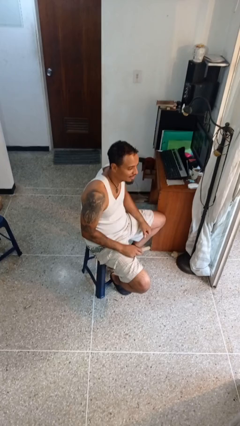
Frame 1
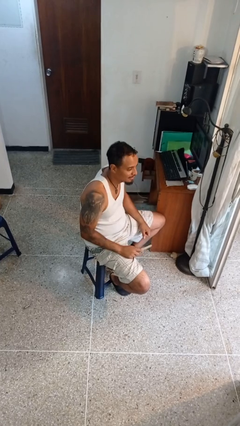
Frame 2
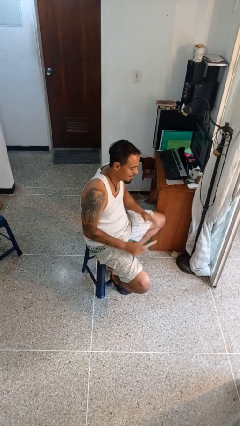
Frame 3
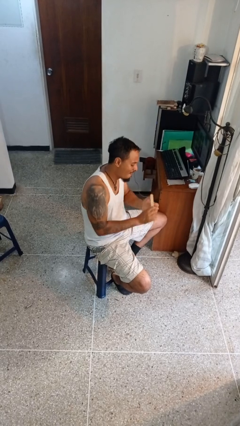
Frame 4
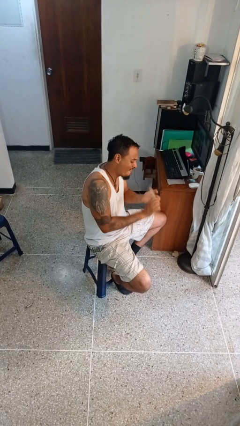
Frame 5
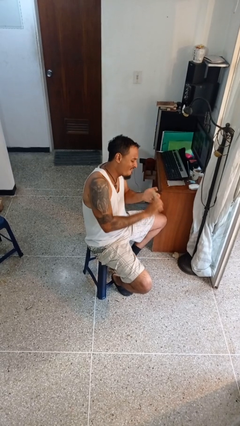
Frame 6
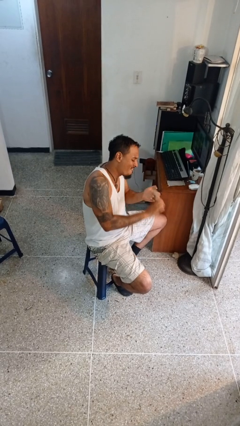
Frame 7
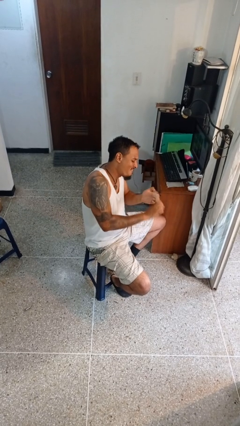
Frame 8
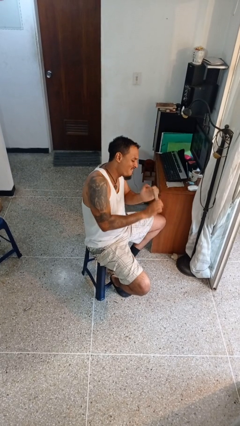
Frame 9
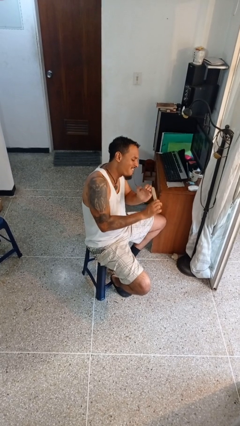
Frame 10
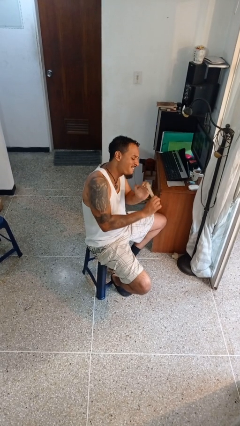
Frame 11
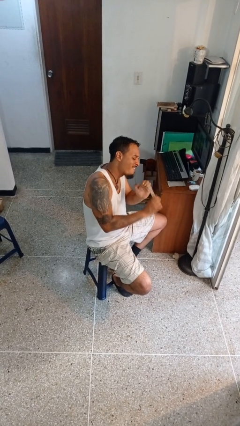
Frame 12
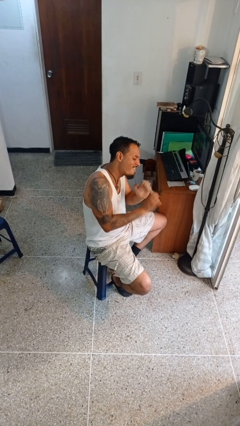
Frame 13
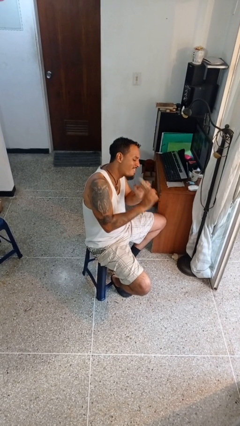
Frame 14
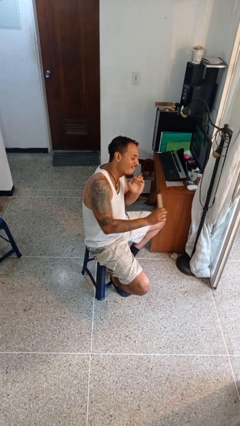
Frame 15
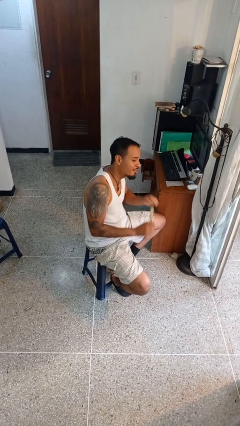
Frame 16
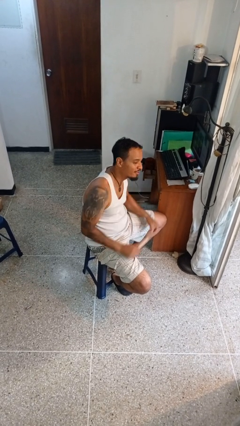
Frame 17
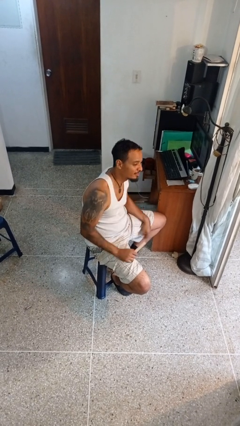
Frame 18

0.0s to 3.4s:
person files fingernails

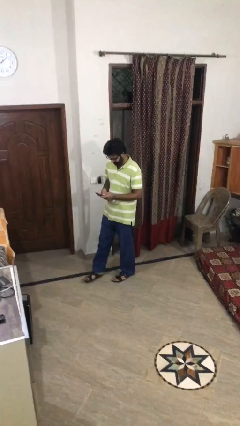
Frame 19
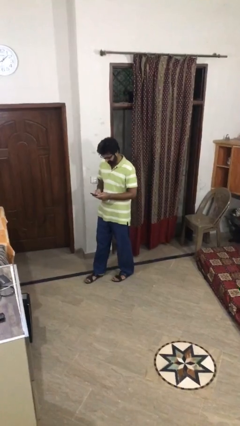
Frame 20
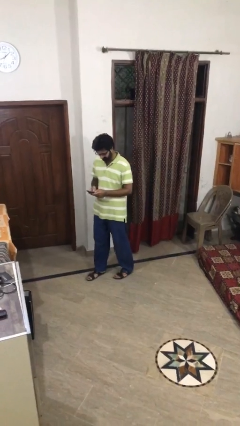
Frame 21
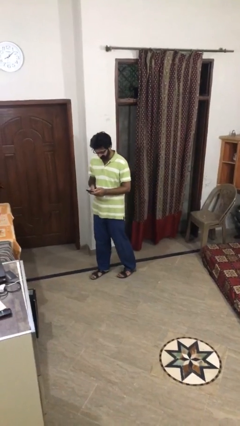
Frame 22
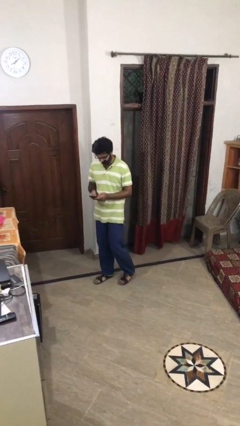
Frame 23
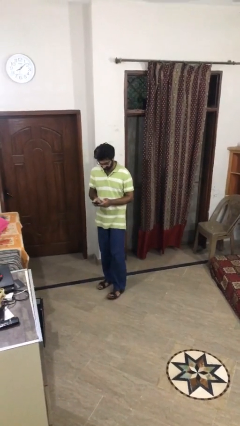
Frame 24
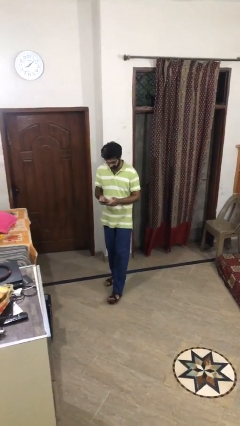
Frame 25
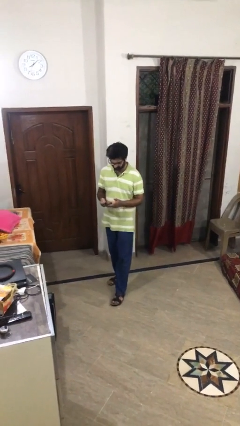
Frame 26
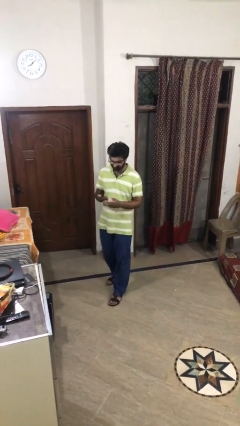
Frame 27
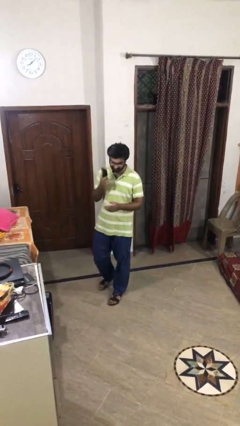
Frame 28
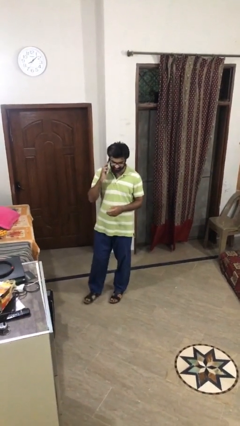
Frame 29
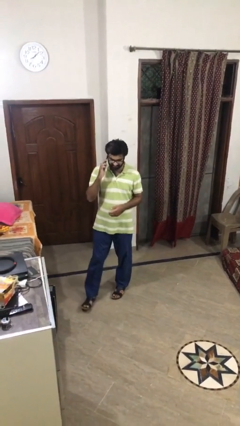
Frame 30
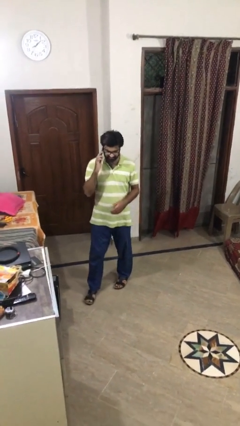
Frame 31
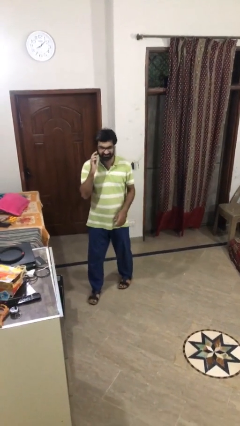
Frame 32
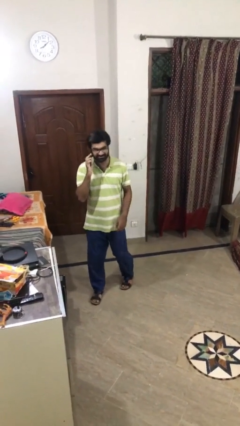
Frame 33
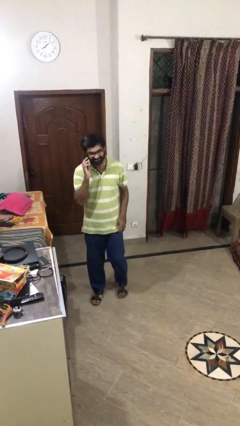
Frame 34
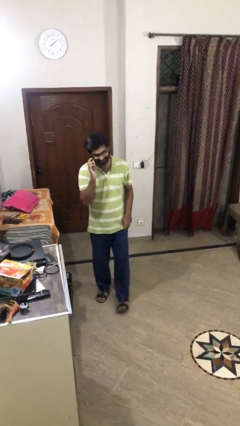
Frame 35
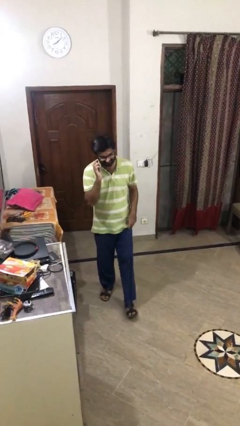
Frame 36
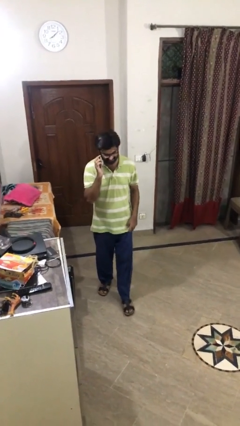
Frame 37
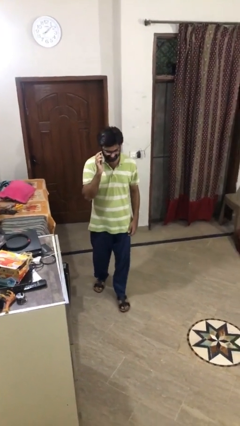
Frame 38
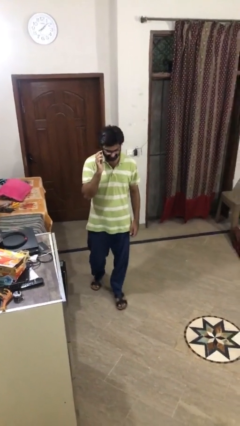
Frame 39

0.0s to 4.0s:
person talks on phone

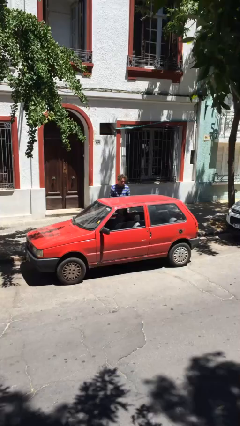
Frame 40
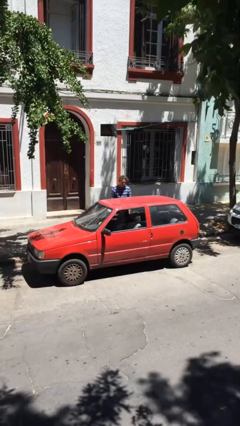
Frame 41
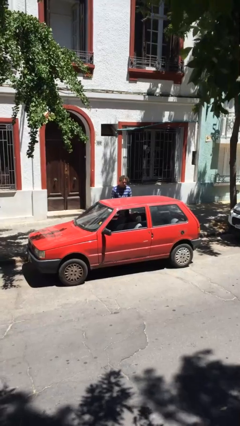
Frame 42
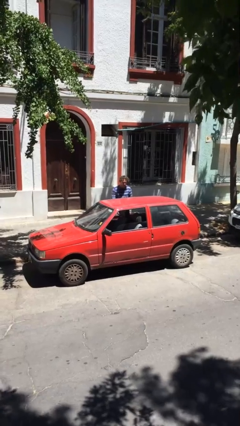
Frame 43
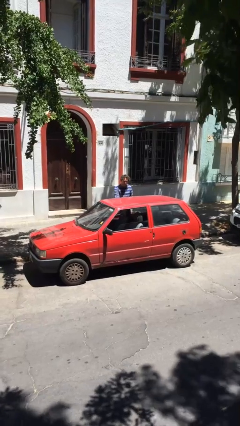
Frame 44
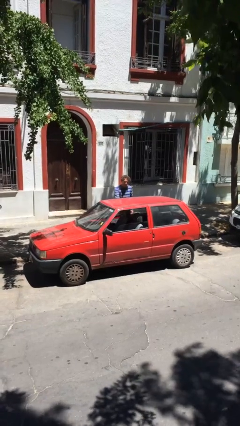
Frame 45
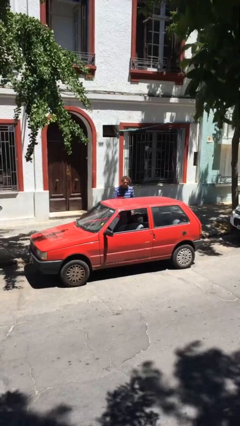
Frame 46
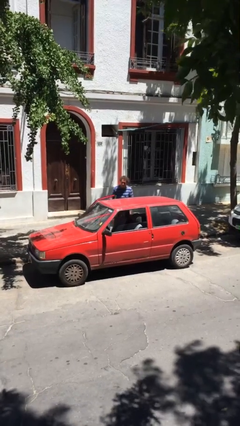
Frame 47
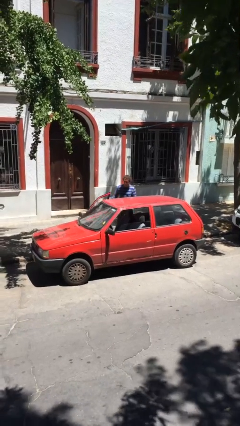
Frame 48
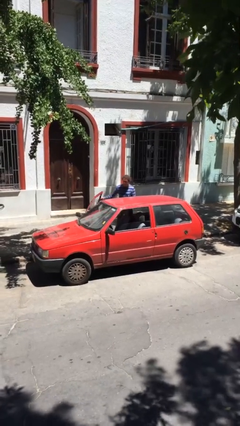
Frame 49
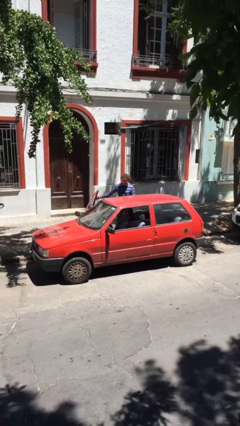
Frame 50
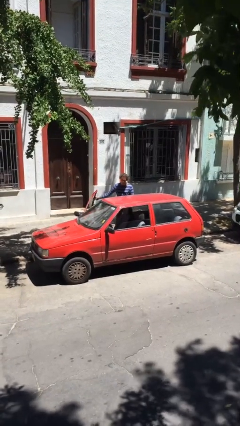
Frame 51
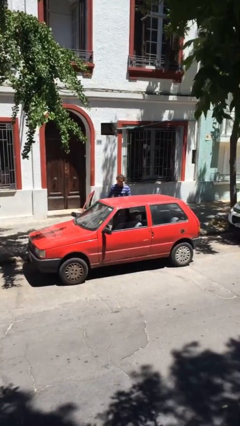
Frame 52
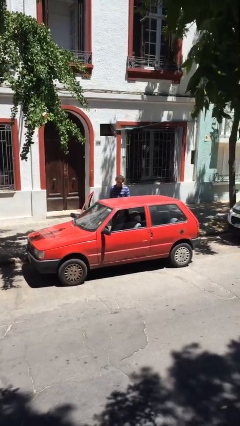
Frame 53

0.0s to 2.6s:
person opens car door

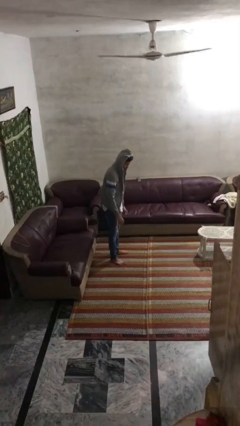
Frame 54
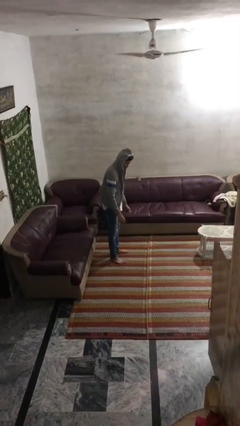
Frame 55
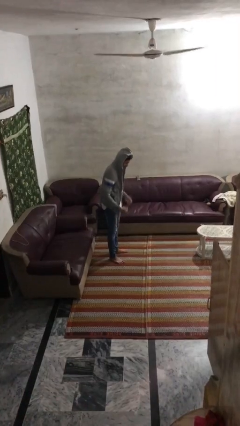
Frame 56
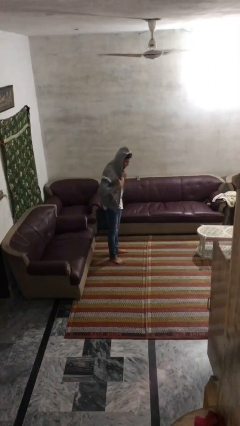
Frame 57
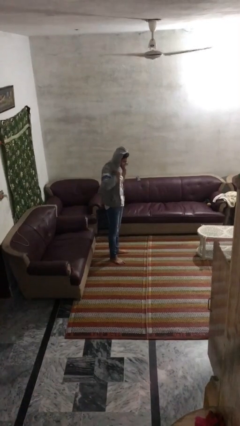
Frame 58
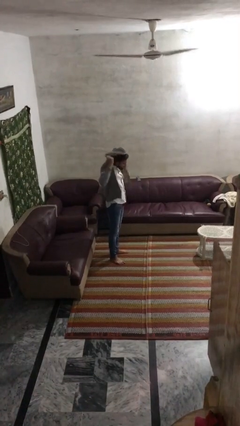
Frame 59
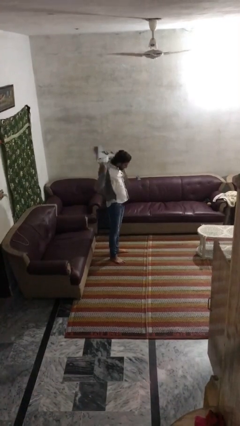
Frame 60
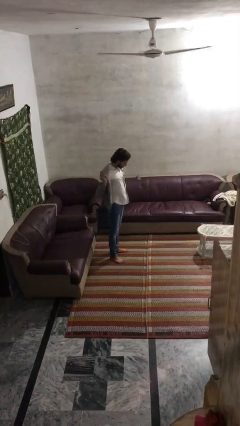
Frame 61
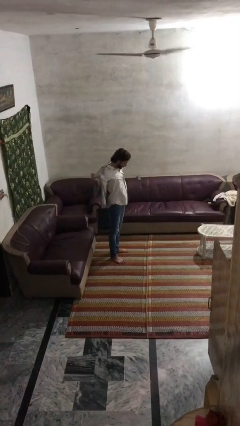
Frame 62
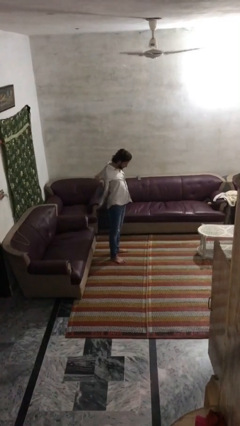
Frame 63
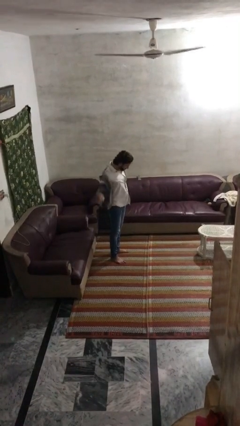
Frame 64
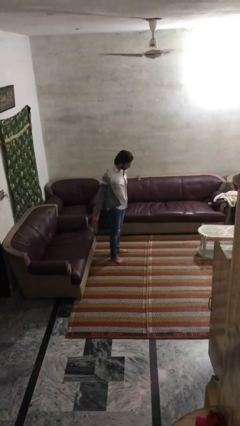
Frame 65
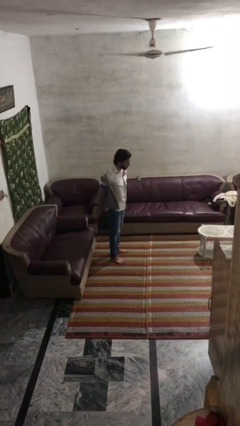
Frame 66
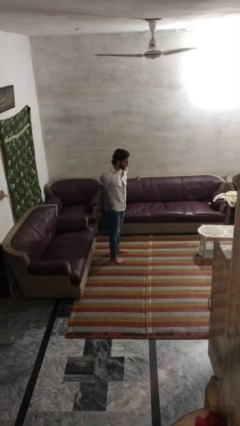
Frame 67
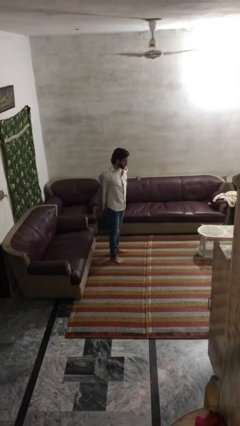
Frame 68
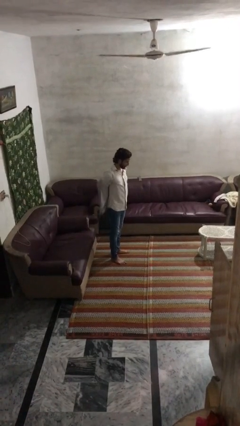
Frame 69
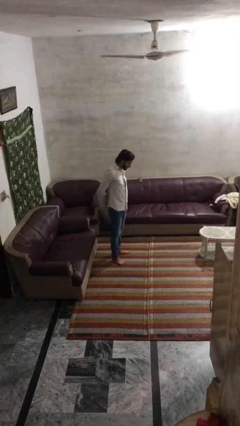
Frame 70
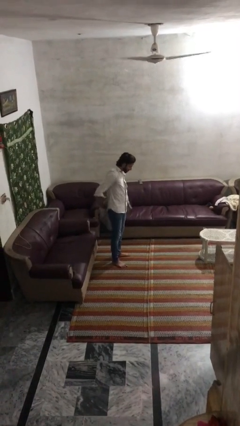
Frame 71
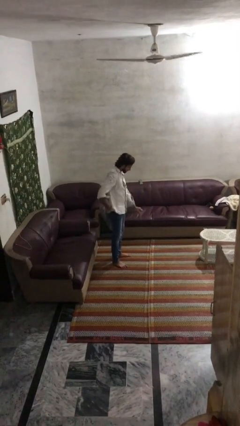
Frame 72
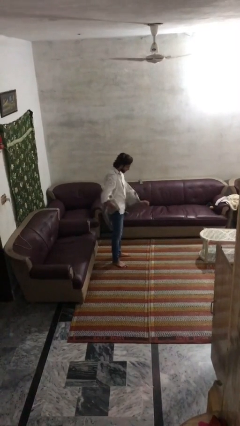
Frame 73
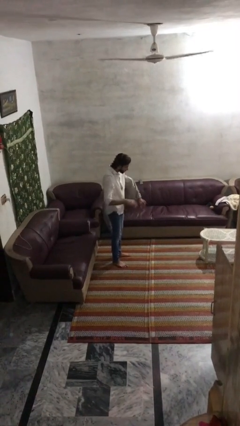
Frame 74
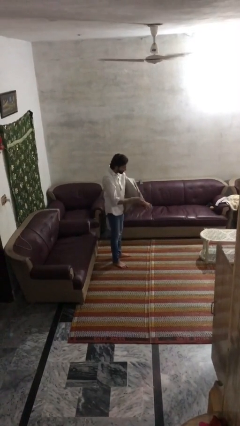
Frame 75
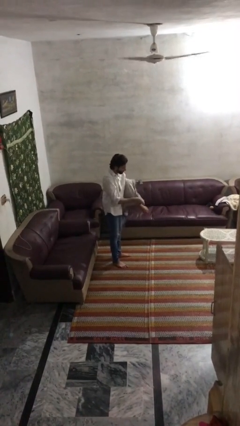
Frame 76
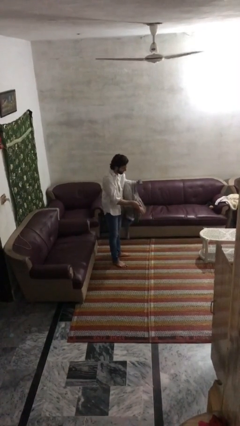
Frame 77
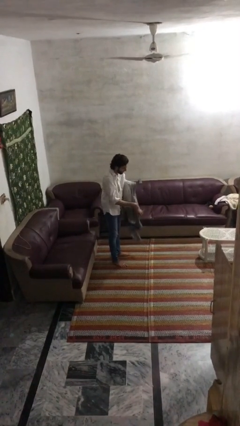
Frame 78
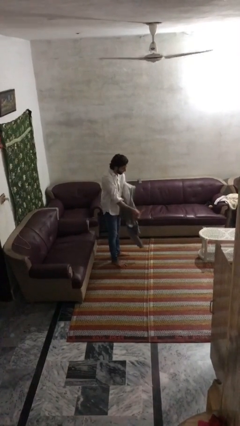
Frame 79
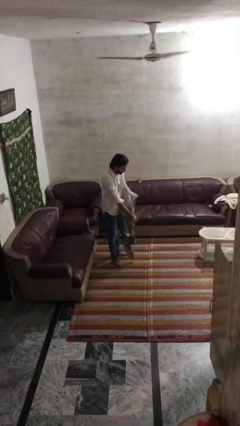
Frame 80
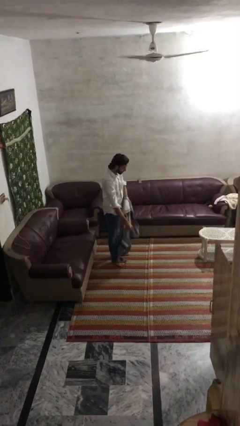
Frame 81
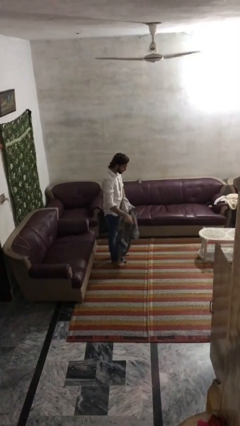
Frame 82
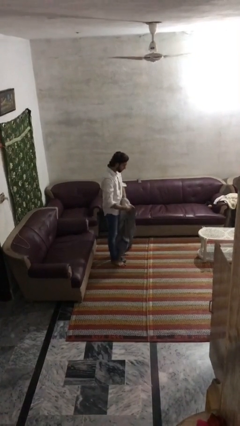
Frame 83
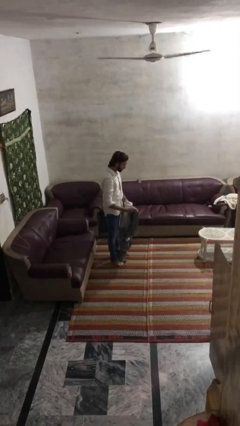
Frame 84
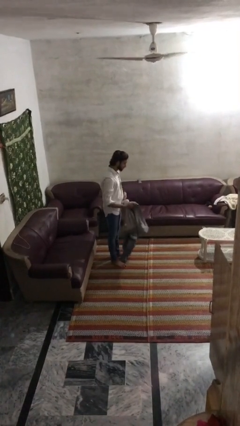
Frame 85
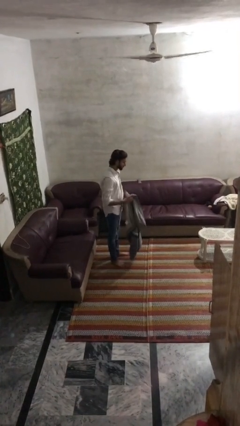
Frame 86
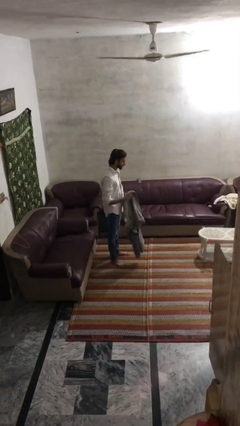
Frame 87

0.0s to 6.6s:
person takes off hoodie

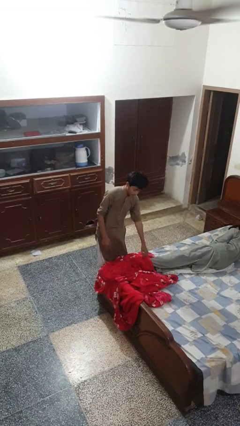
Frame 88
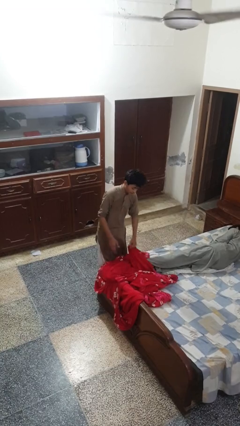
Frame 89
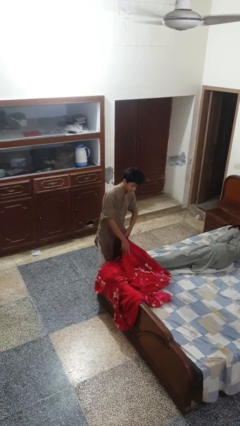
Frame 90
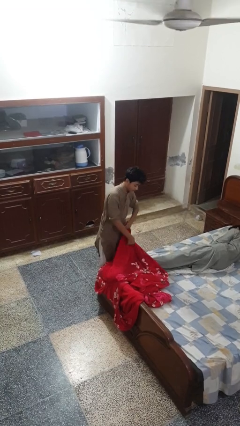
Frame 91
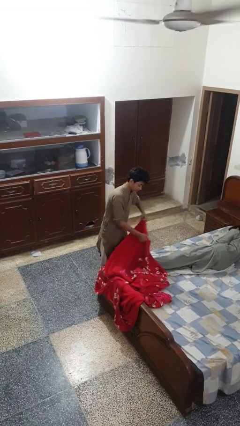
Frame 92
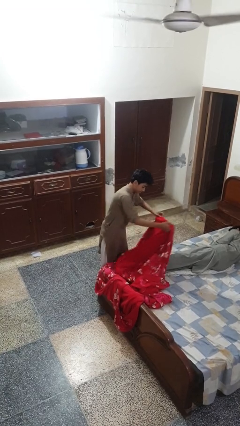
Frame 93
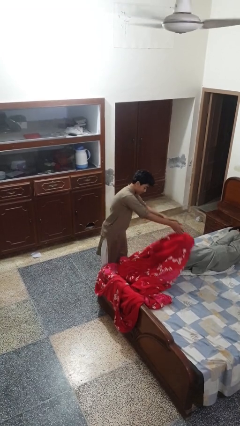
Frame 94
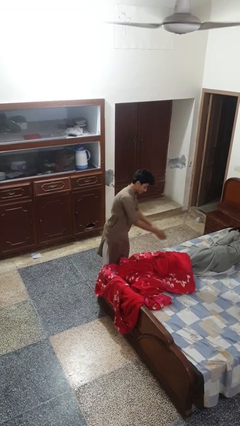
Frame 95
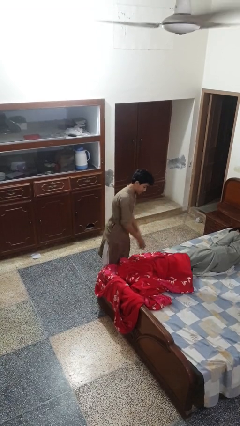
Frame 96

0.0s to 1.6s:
person covers friend with blanket
